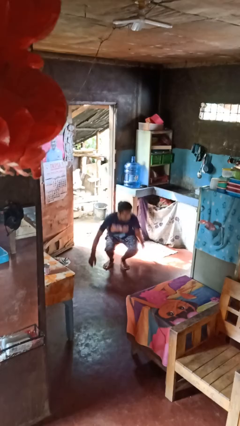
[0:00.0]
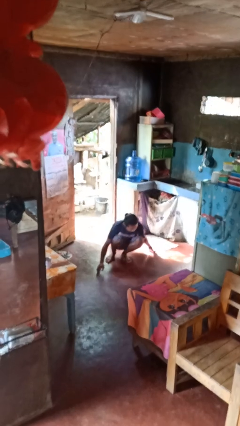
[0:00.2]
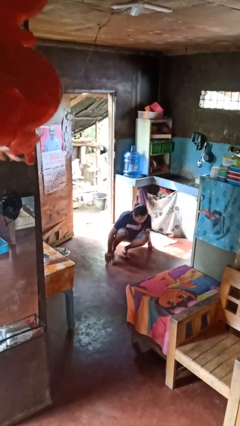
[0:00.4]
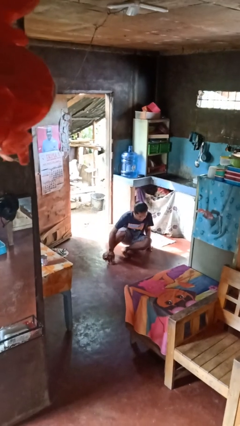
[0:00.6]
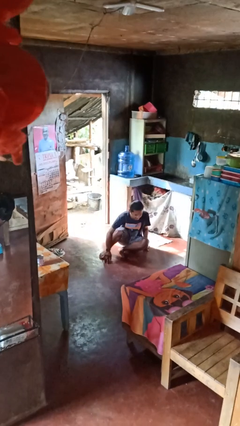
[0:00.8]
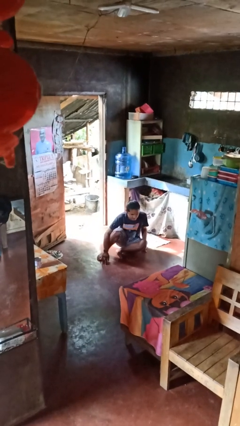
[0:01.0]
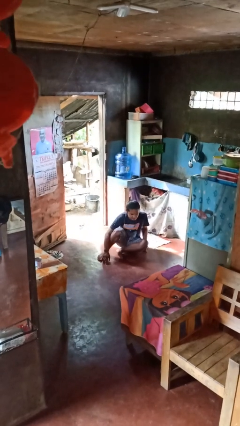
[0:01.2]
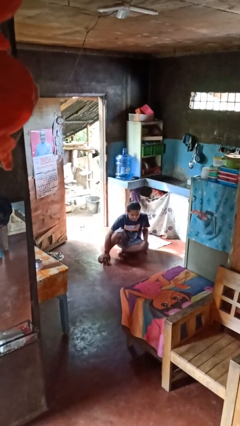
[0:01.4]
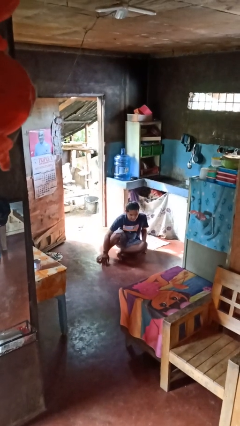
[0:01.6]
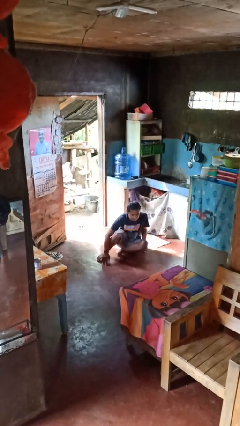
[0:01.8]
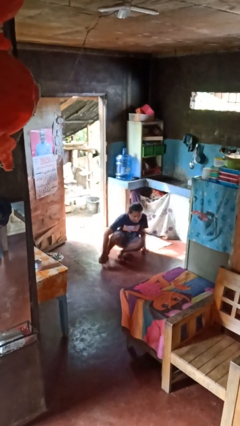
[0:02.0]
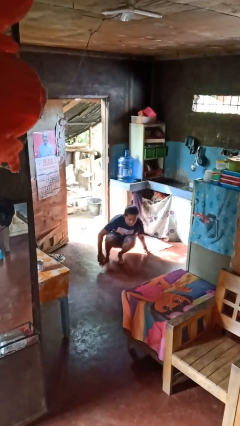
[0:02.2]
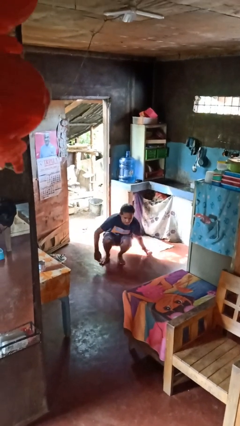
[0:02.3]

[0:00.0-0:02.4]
person falls while standing

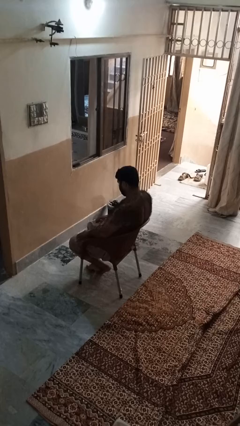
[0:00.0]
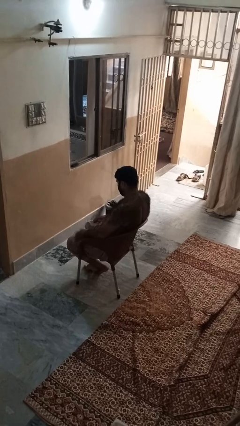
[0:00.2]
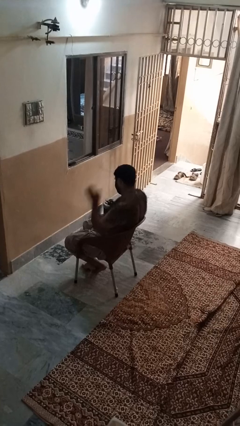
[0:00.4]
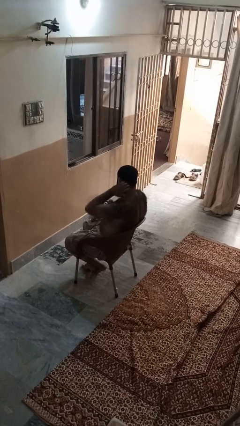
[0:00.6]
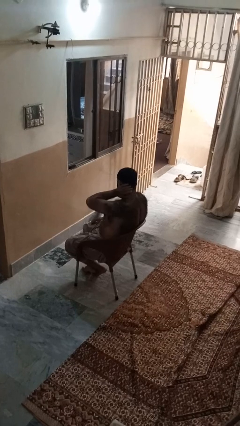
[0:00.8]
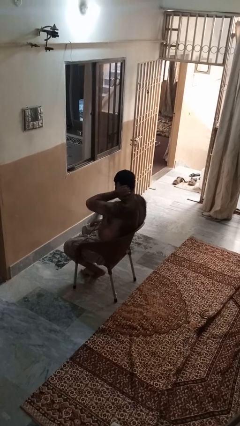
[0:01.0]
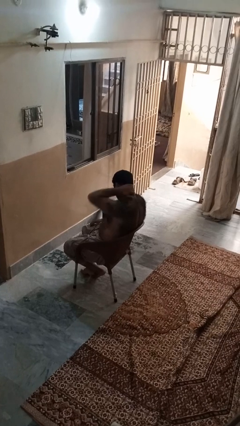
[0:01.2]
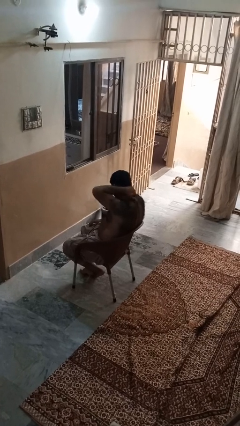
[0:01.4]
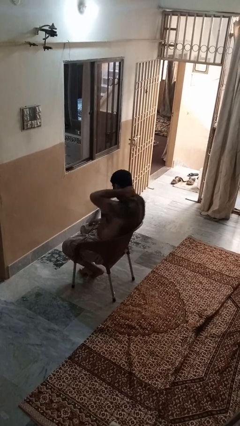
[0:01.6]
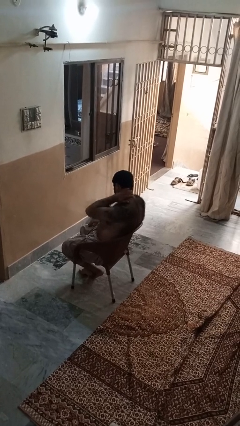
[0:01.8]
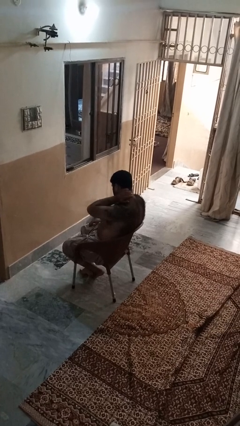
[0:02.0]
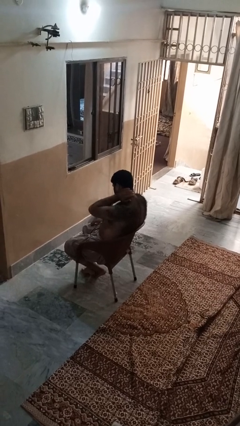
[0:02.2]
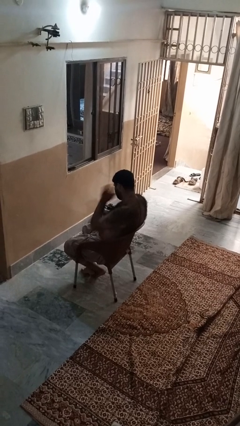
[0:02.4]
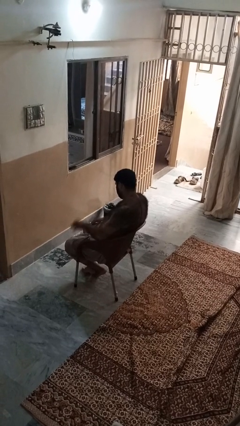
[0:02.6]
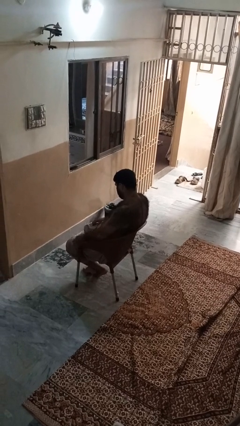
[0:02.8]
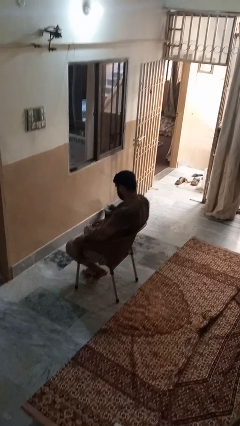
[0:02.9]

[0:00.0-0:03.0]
person rubs neck

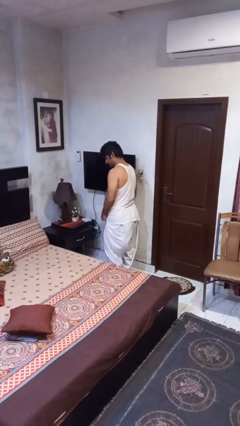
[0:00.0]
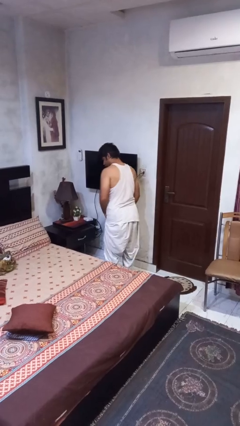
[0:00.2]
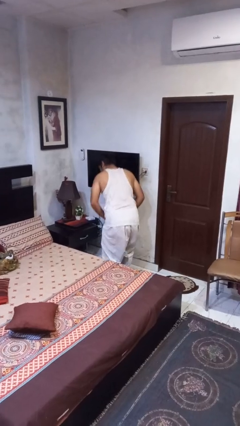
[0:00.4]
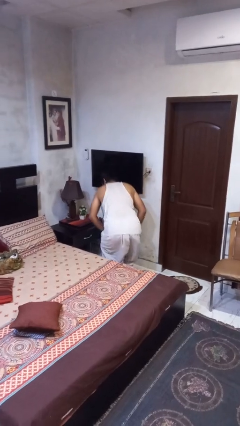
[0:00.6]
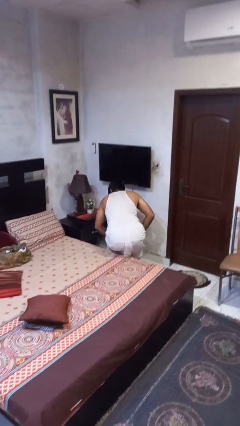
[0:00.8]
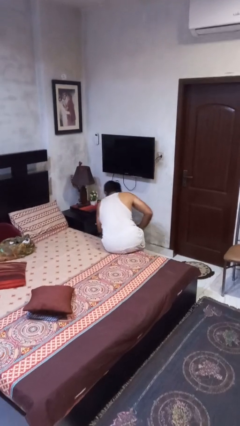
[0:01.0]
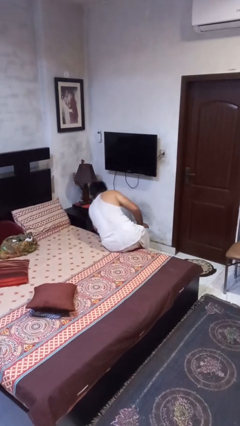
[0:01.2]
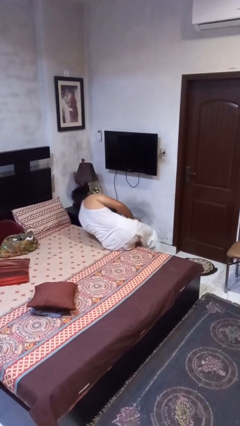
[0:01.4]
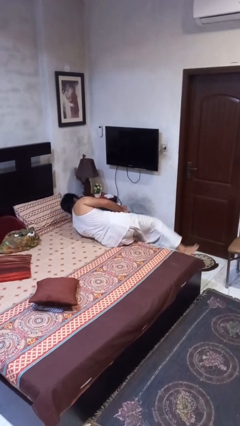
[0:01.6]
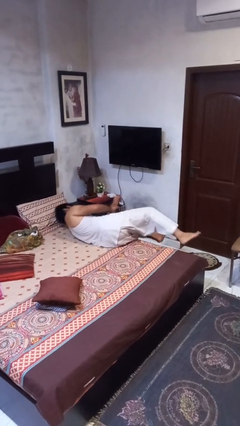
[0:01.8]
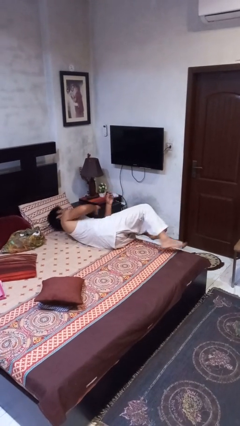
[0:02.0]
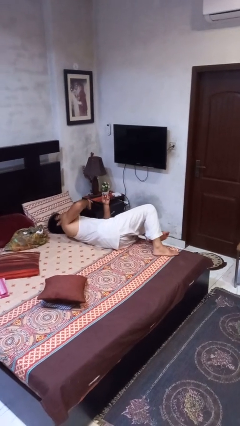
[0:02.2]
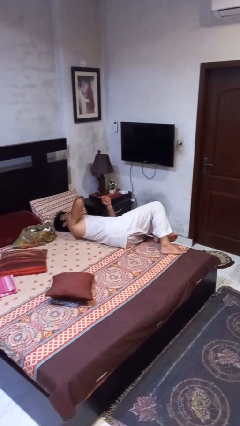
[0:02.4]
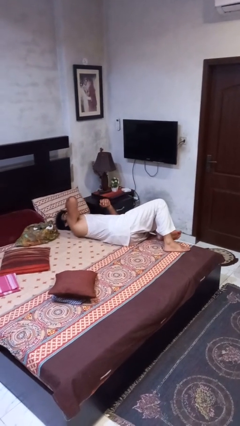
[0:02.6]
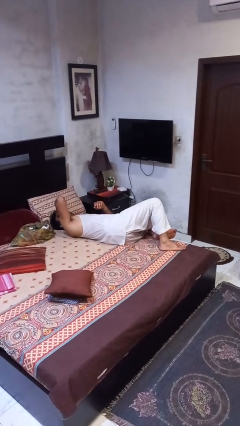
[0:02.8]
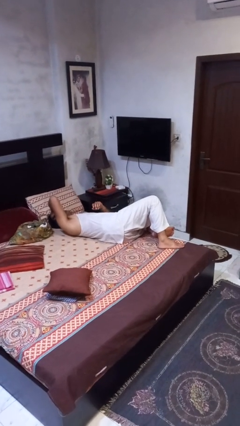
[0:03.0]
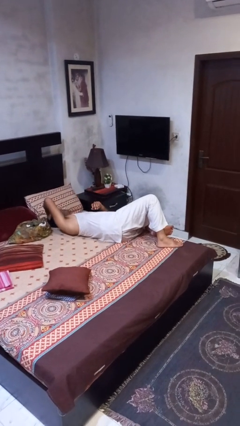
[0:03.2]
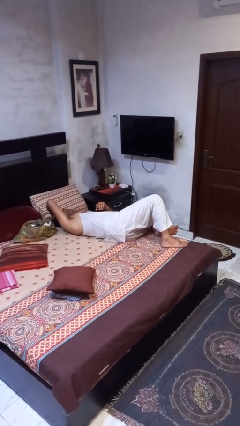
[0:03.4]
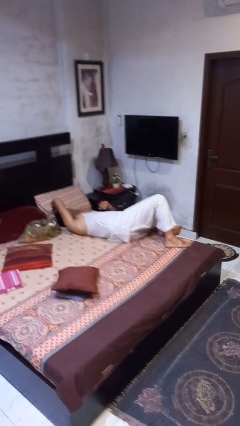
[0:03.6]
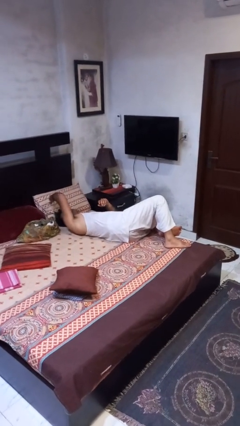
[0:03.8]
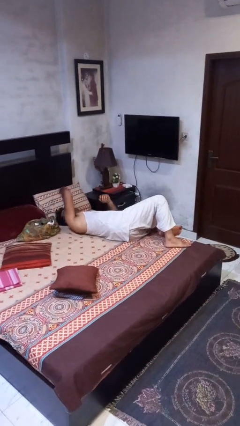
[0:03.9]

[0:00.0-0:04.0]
person lies down on bed

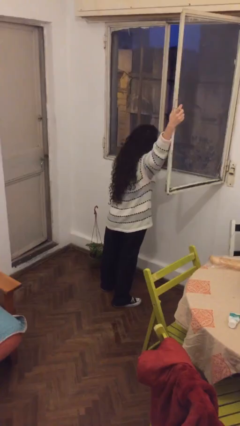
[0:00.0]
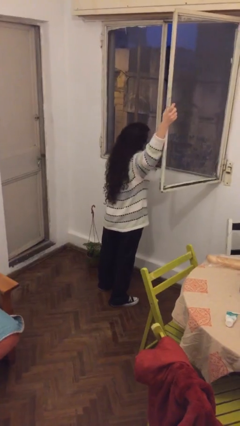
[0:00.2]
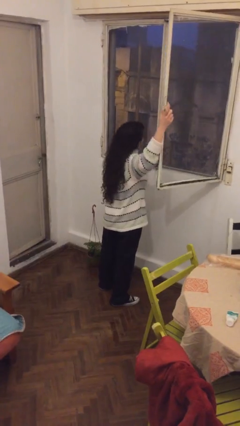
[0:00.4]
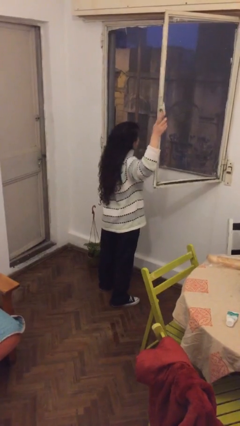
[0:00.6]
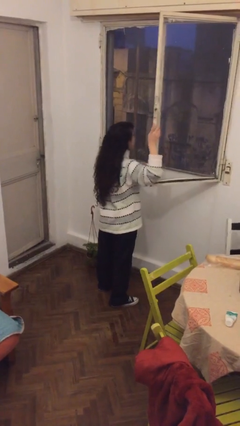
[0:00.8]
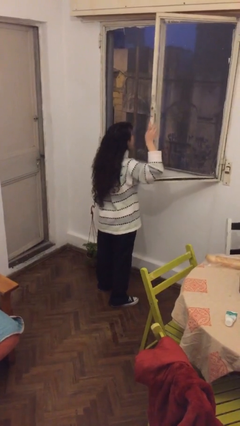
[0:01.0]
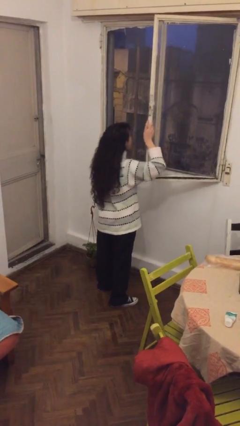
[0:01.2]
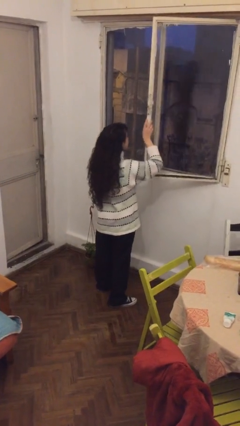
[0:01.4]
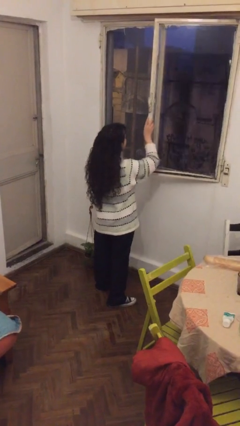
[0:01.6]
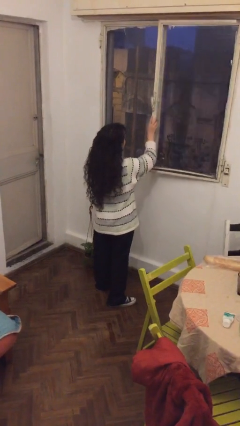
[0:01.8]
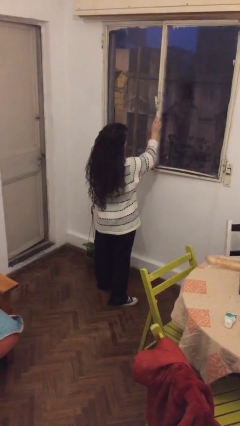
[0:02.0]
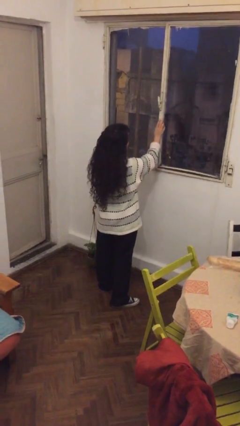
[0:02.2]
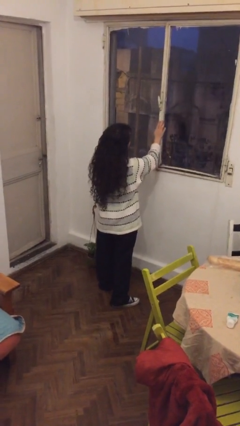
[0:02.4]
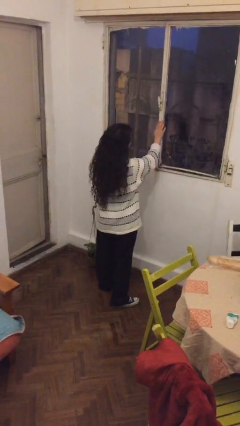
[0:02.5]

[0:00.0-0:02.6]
person closes home window

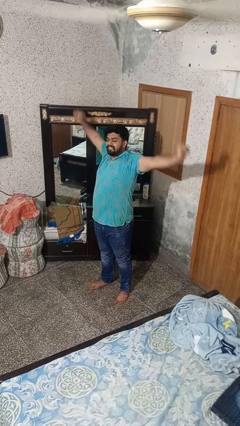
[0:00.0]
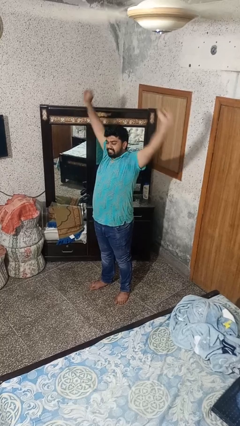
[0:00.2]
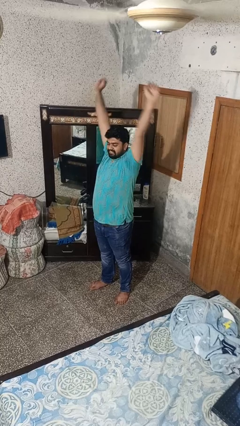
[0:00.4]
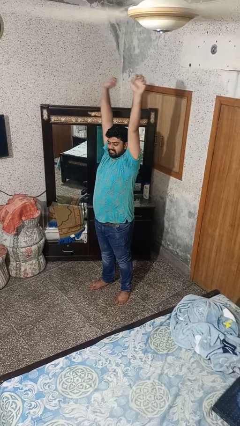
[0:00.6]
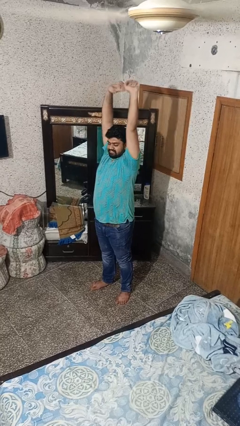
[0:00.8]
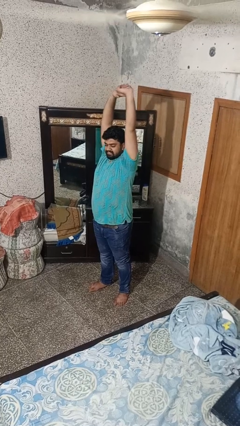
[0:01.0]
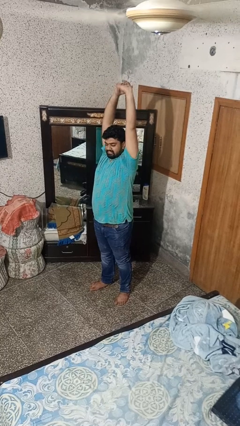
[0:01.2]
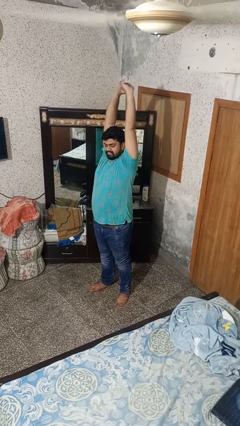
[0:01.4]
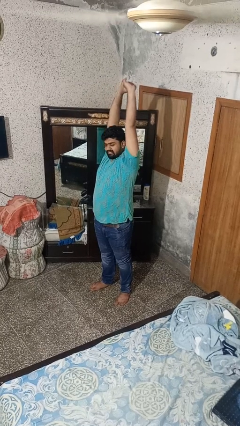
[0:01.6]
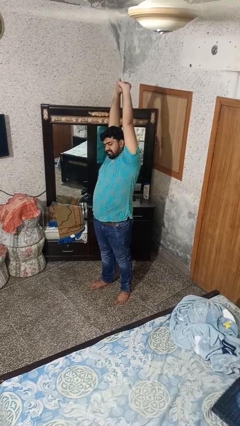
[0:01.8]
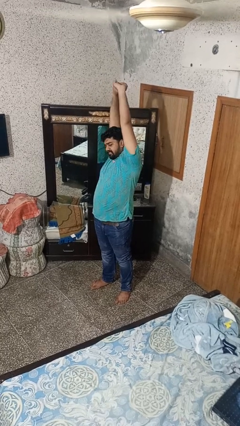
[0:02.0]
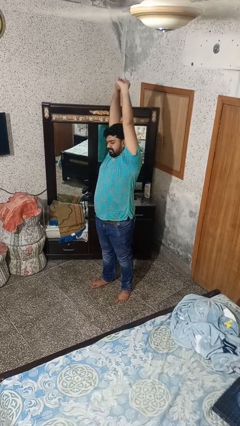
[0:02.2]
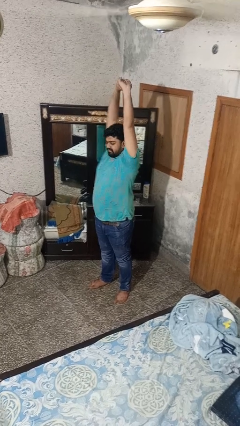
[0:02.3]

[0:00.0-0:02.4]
person stretches arms over head

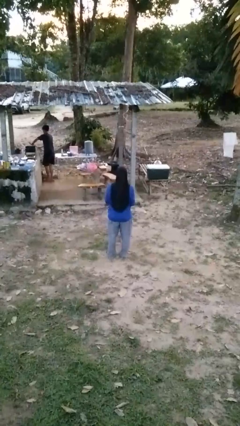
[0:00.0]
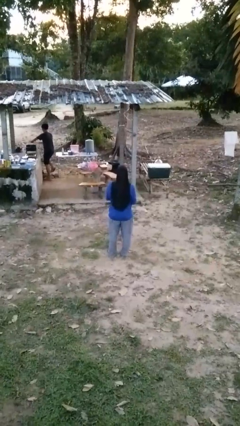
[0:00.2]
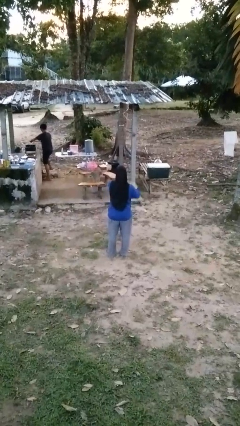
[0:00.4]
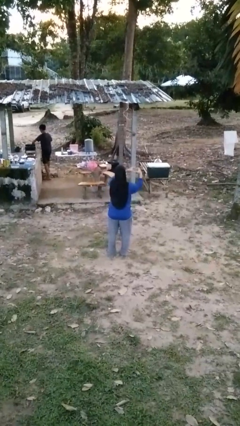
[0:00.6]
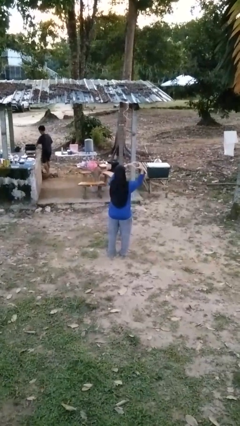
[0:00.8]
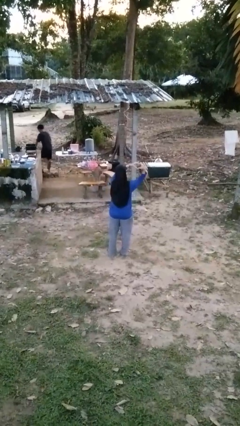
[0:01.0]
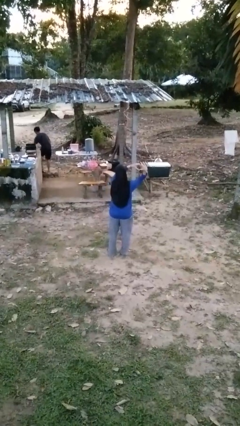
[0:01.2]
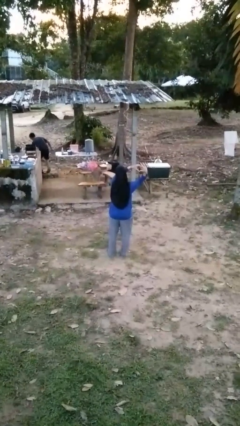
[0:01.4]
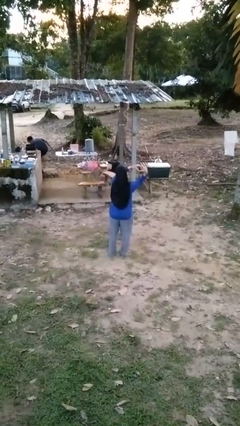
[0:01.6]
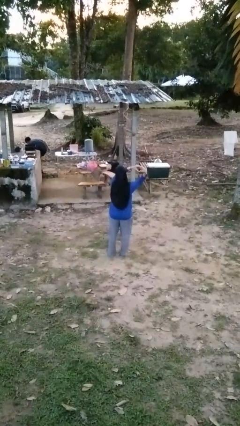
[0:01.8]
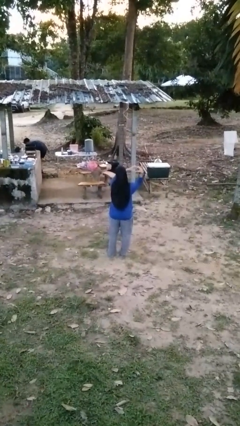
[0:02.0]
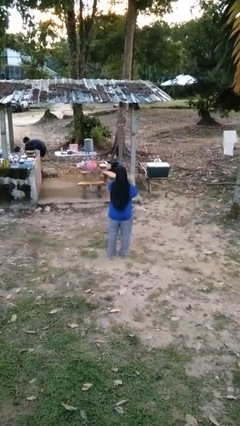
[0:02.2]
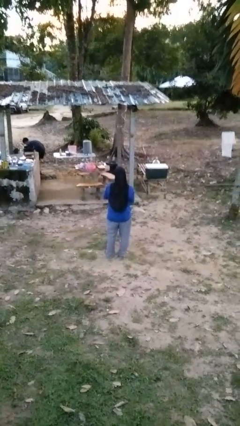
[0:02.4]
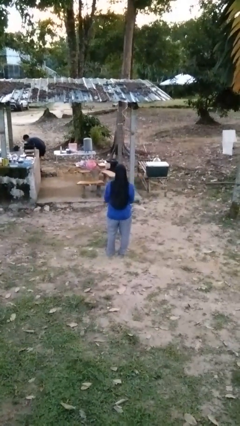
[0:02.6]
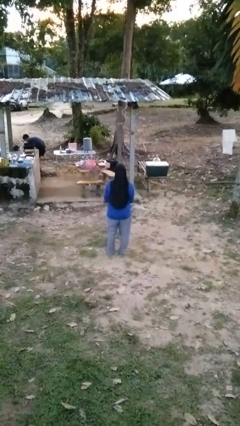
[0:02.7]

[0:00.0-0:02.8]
person gestures heart
